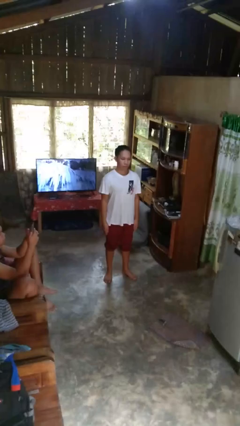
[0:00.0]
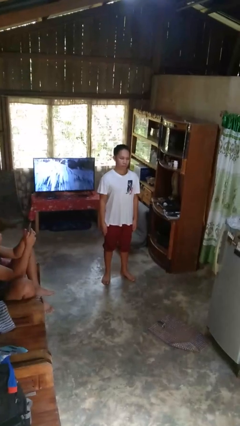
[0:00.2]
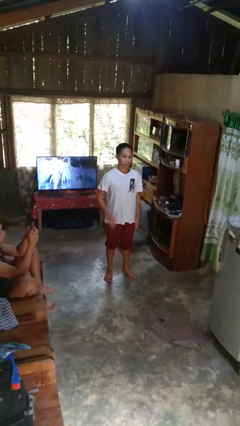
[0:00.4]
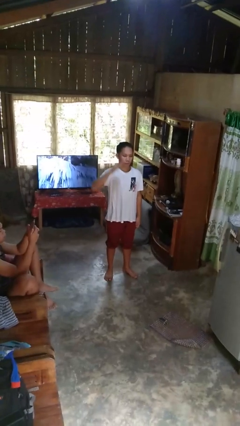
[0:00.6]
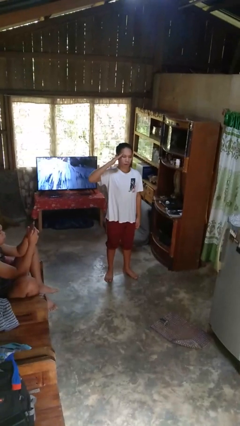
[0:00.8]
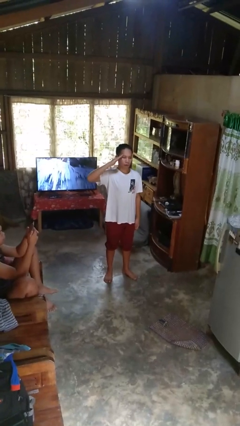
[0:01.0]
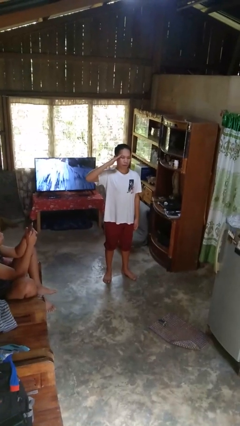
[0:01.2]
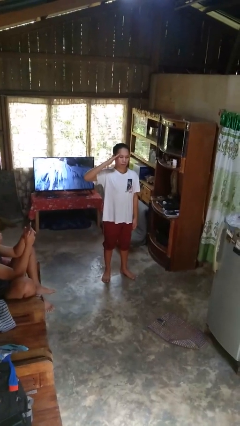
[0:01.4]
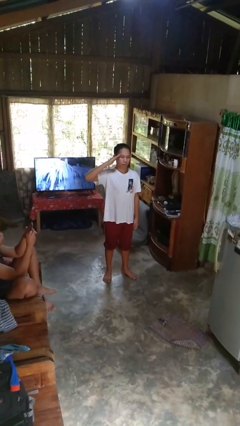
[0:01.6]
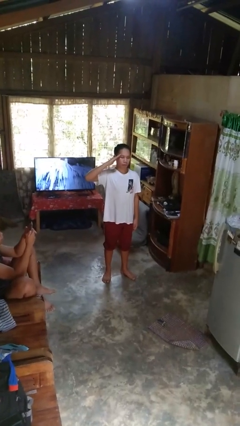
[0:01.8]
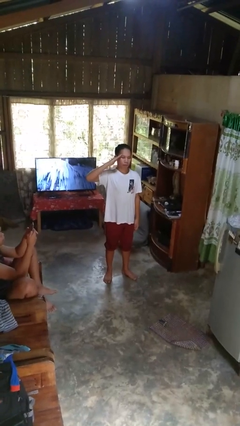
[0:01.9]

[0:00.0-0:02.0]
person salutes

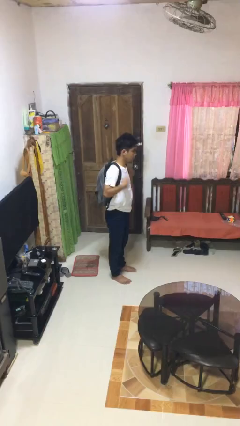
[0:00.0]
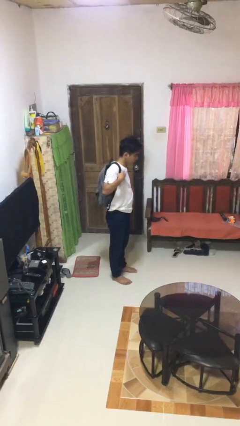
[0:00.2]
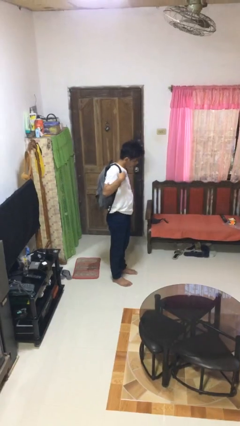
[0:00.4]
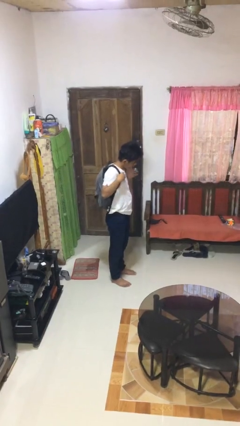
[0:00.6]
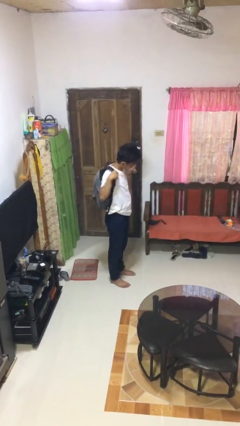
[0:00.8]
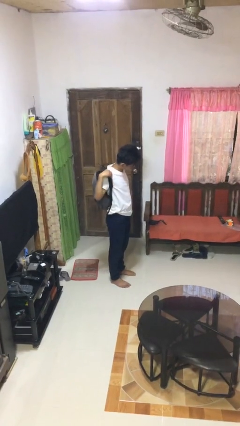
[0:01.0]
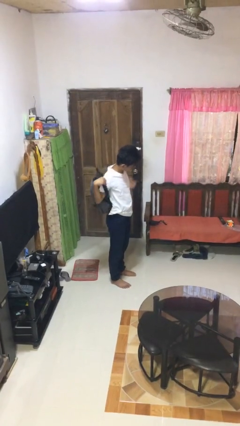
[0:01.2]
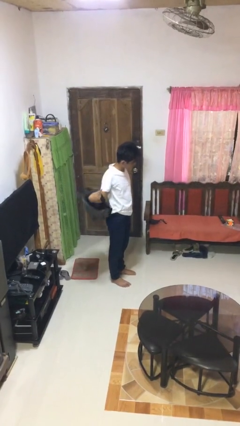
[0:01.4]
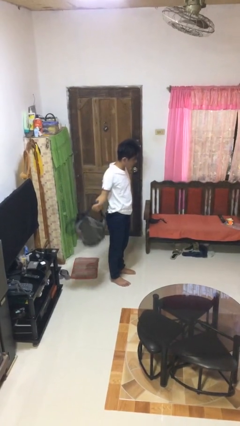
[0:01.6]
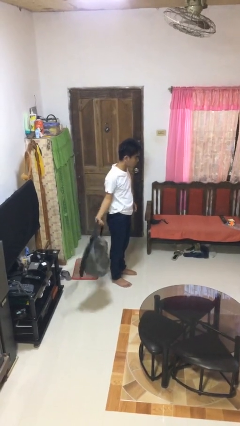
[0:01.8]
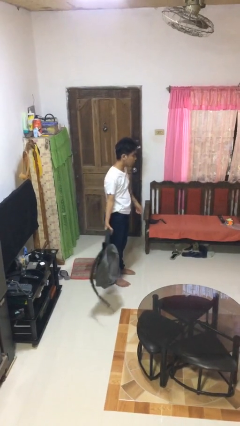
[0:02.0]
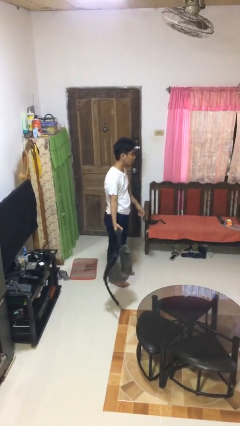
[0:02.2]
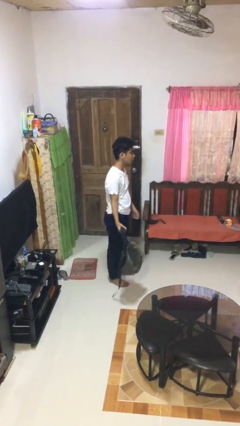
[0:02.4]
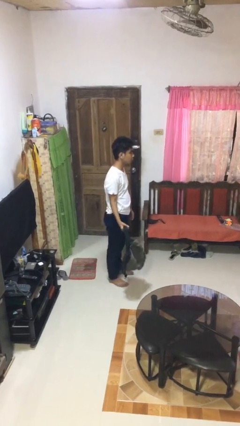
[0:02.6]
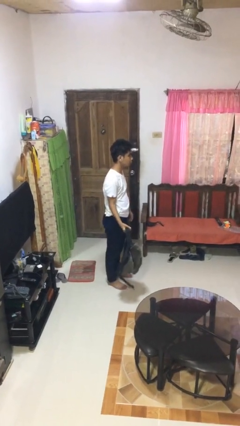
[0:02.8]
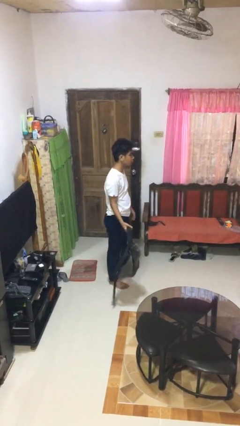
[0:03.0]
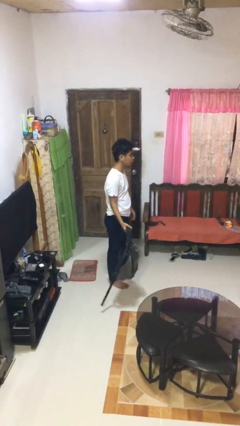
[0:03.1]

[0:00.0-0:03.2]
person takes off backpack

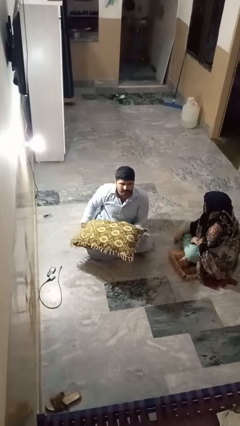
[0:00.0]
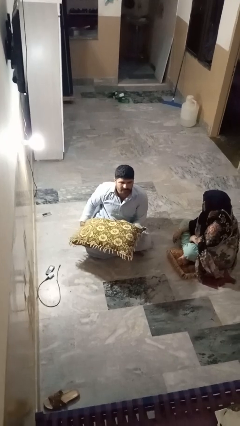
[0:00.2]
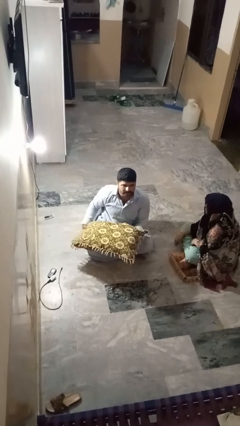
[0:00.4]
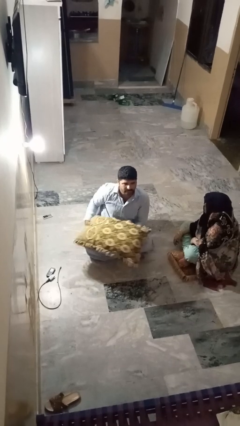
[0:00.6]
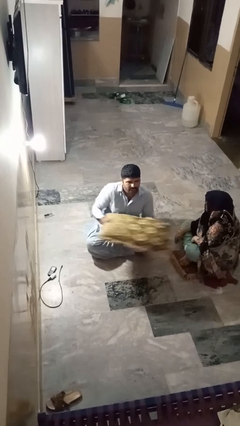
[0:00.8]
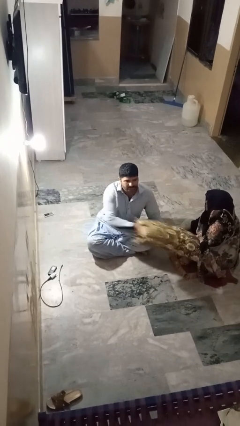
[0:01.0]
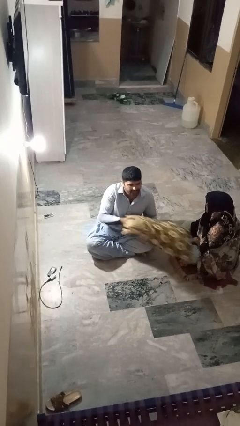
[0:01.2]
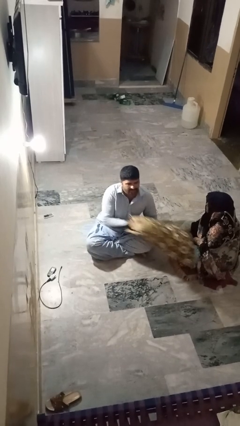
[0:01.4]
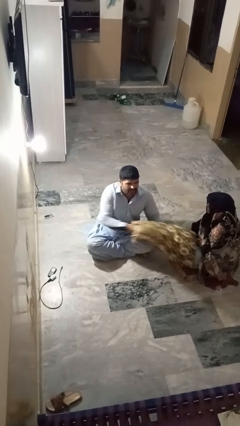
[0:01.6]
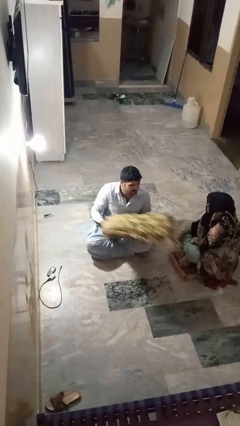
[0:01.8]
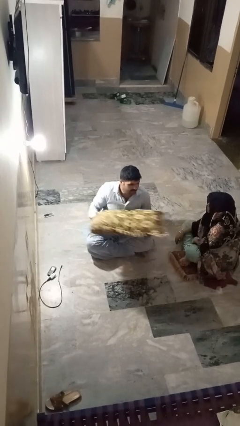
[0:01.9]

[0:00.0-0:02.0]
person hits person with pillow

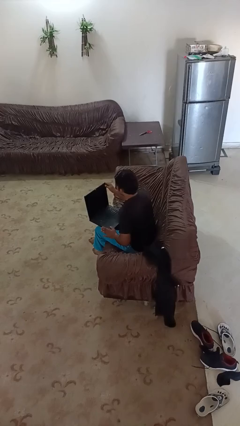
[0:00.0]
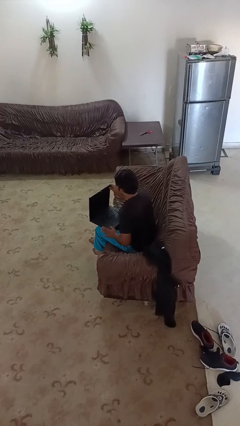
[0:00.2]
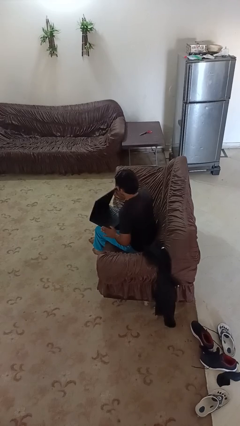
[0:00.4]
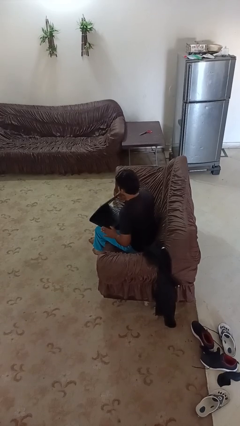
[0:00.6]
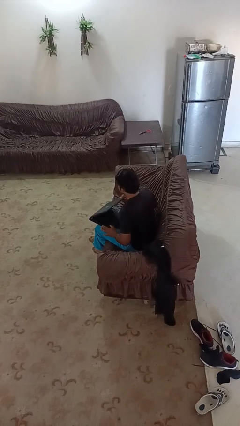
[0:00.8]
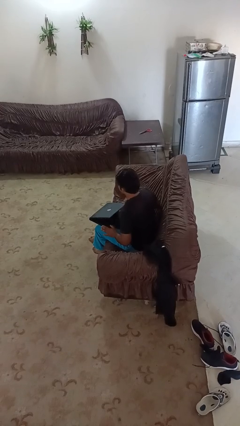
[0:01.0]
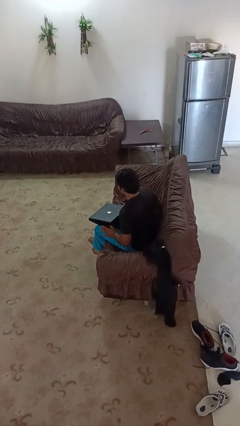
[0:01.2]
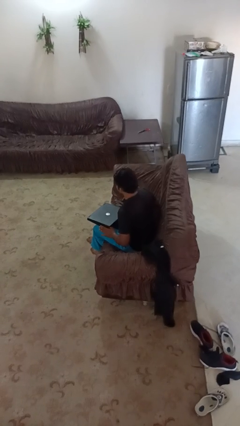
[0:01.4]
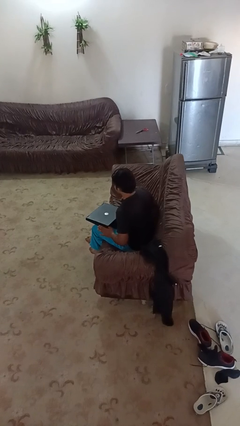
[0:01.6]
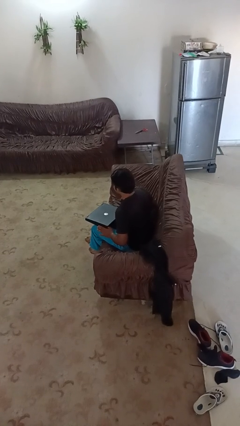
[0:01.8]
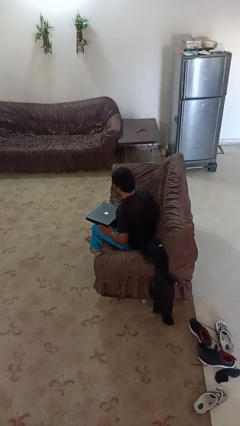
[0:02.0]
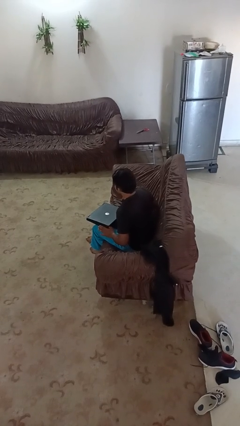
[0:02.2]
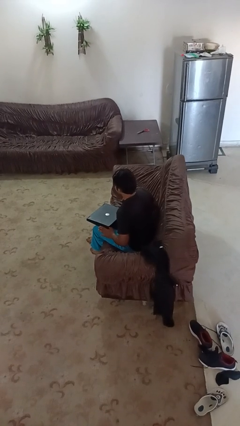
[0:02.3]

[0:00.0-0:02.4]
person closes laptop

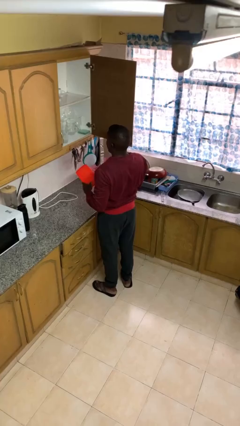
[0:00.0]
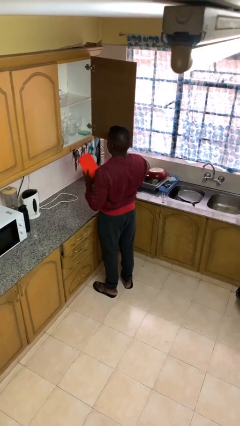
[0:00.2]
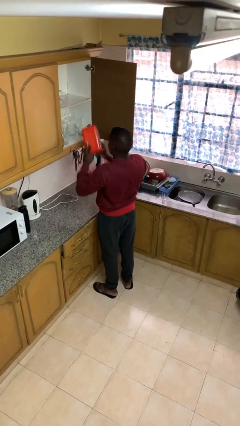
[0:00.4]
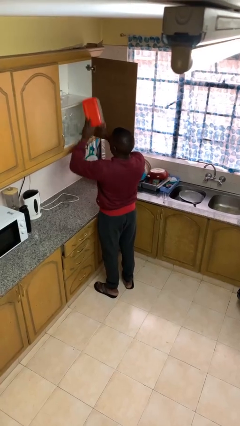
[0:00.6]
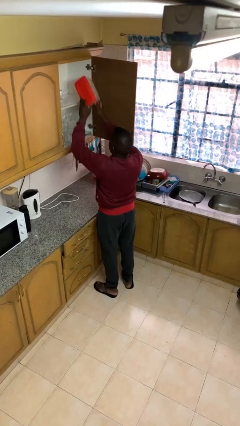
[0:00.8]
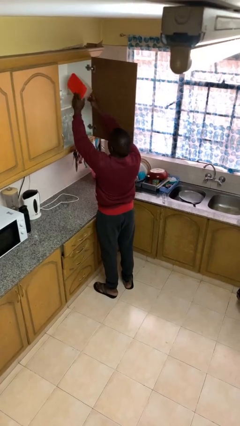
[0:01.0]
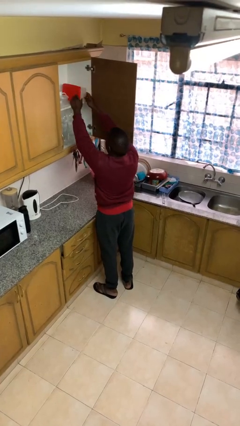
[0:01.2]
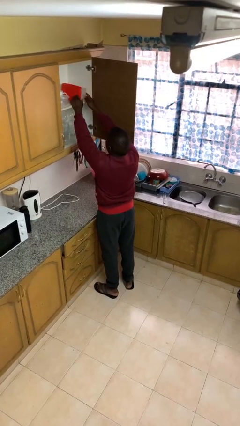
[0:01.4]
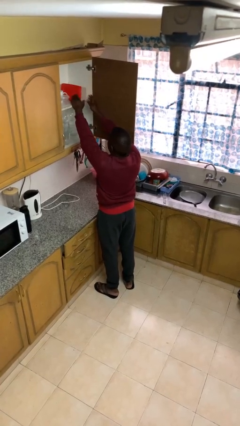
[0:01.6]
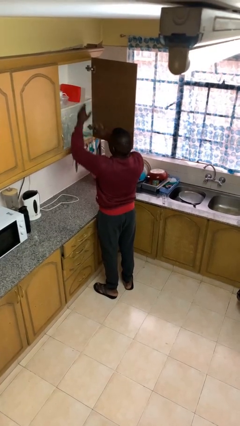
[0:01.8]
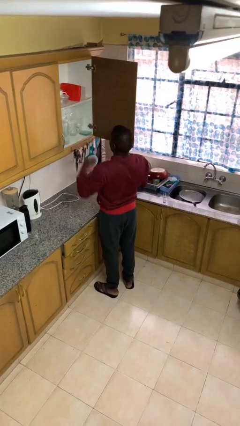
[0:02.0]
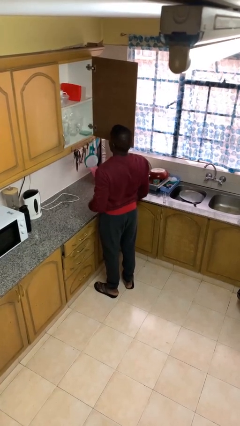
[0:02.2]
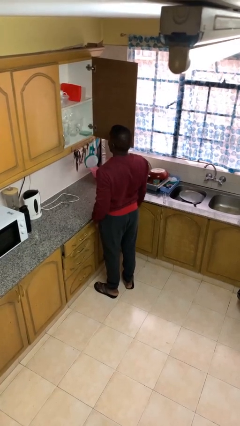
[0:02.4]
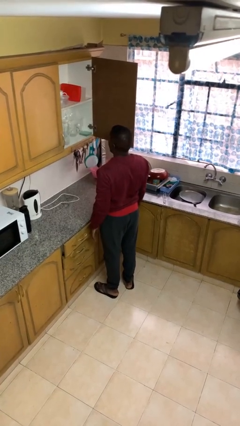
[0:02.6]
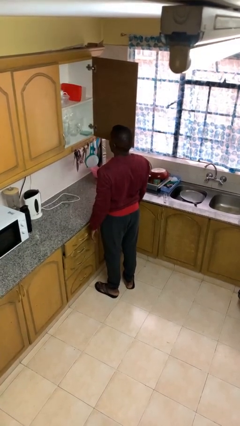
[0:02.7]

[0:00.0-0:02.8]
person puts down object into cabinet

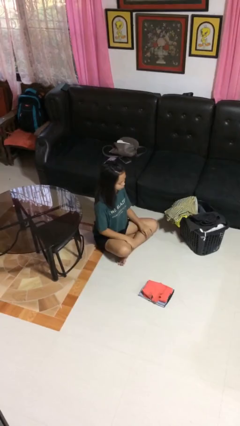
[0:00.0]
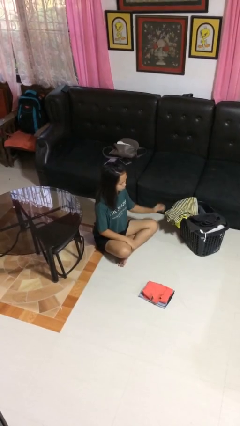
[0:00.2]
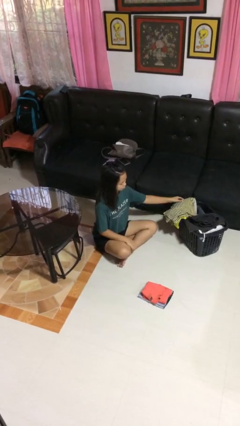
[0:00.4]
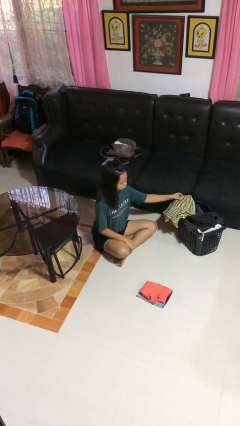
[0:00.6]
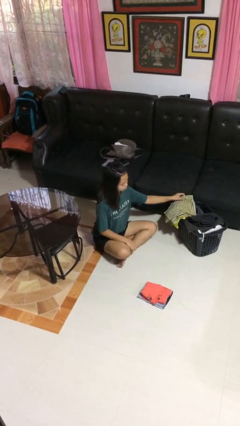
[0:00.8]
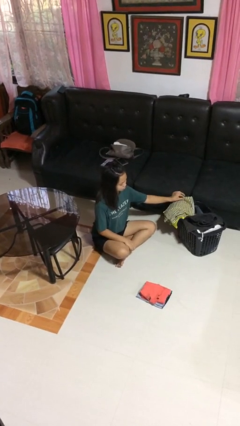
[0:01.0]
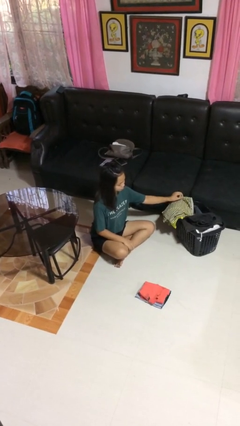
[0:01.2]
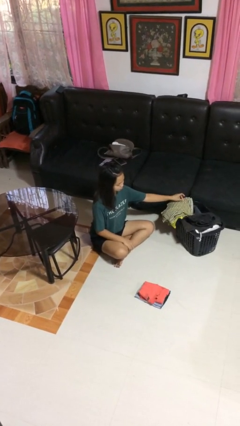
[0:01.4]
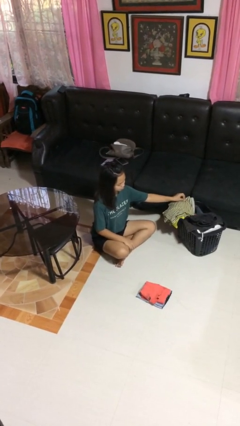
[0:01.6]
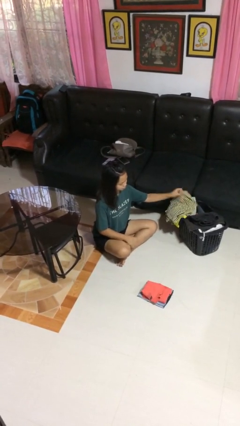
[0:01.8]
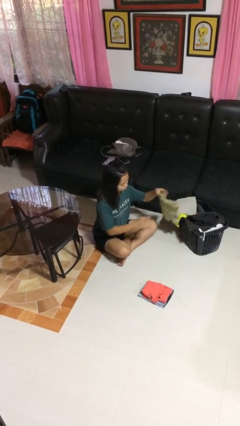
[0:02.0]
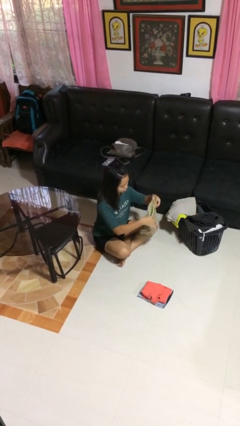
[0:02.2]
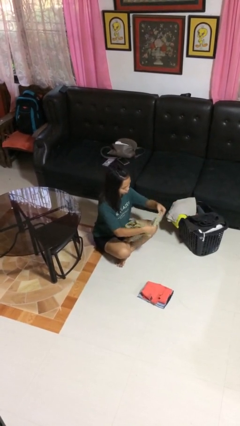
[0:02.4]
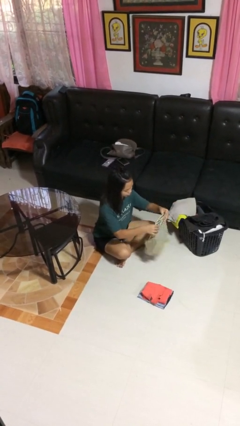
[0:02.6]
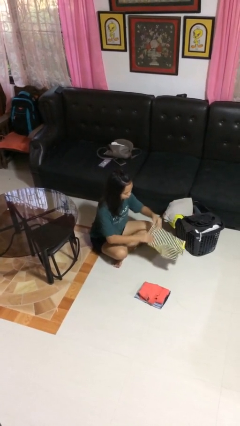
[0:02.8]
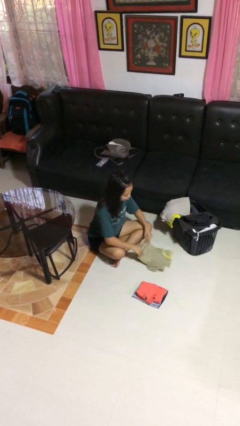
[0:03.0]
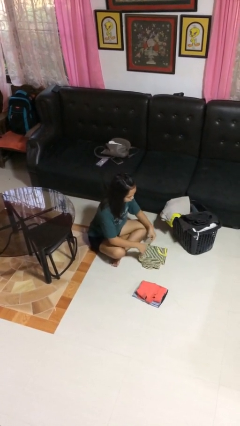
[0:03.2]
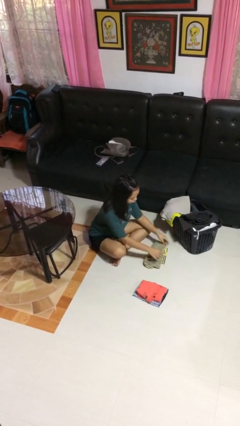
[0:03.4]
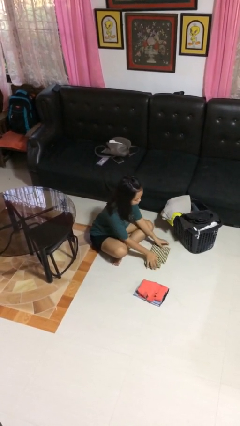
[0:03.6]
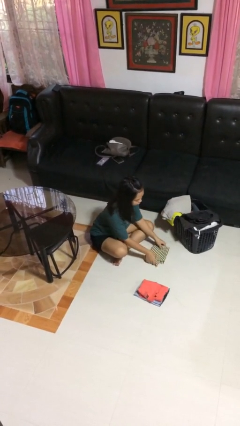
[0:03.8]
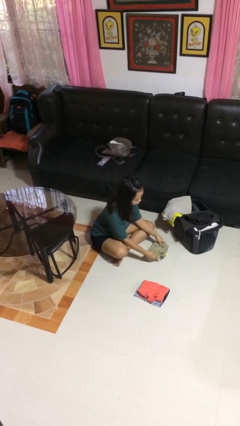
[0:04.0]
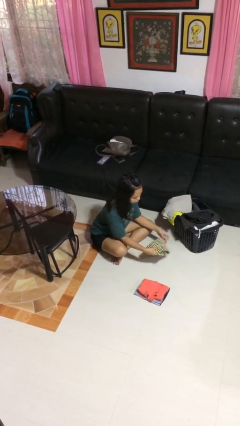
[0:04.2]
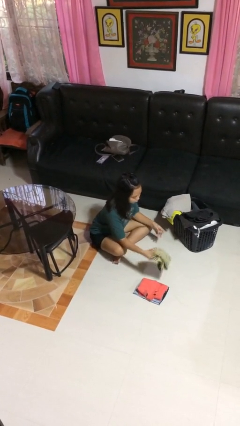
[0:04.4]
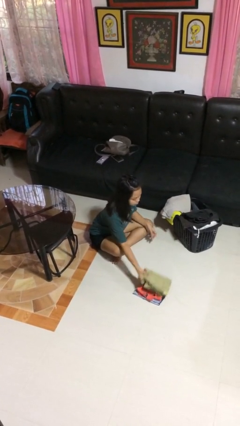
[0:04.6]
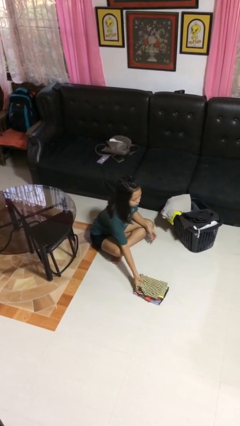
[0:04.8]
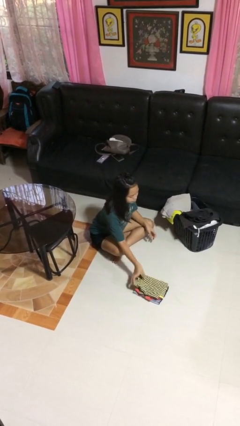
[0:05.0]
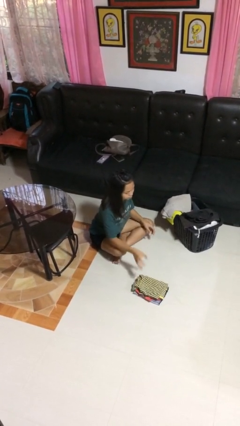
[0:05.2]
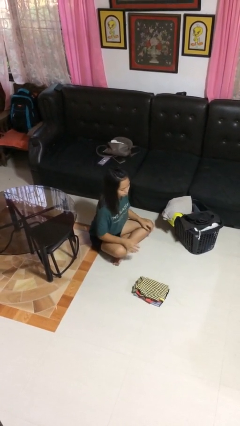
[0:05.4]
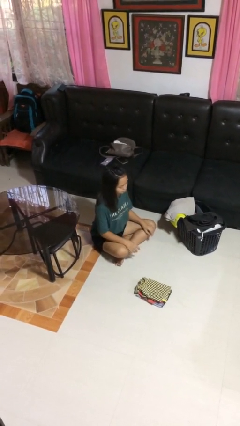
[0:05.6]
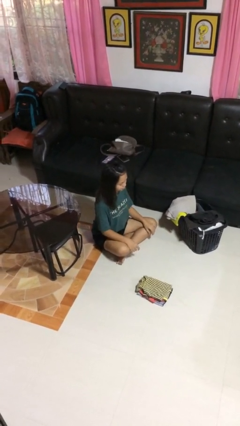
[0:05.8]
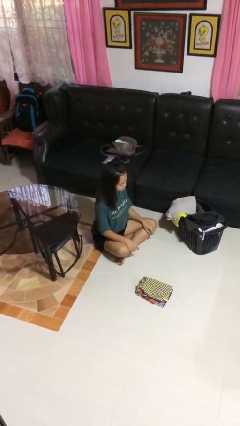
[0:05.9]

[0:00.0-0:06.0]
person folds shirt
